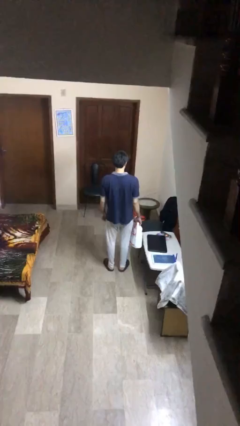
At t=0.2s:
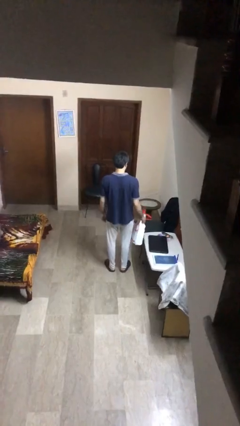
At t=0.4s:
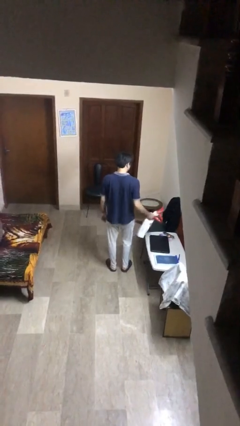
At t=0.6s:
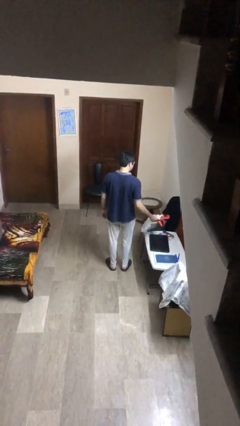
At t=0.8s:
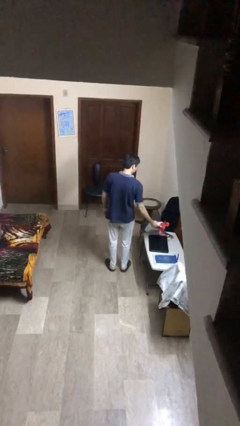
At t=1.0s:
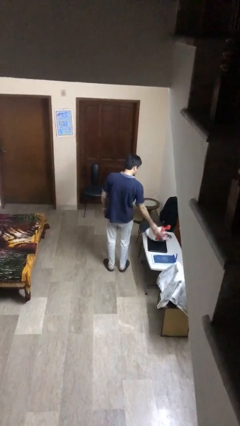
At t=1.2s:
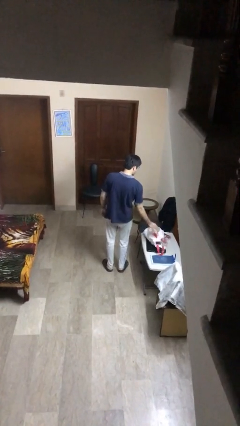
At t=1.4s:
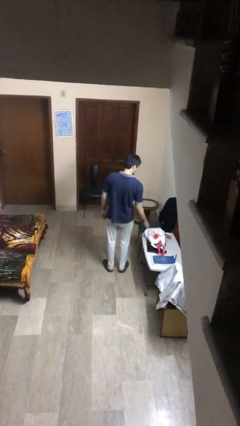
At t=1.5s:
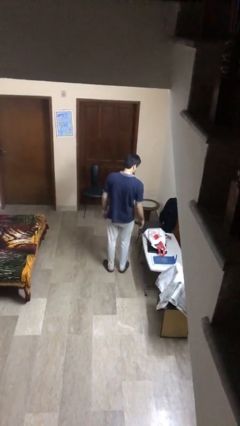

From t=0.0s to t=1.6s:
person puts down object on table

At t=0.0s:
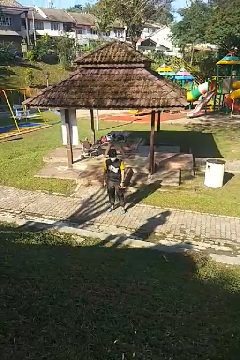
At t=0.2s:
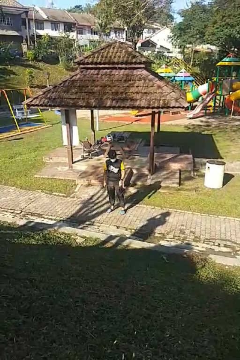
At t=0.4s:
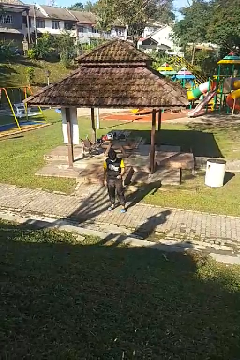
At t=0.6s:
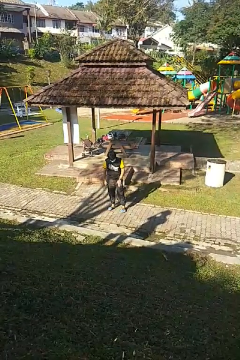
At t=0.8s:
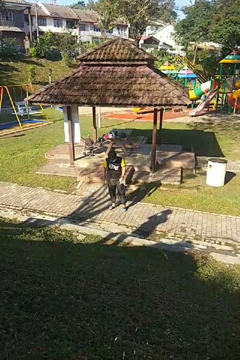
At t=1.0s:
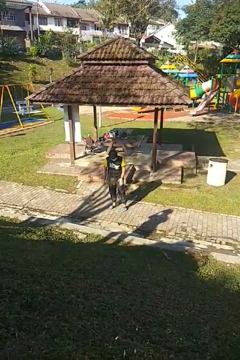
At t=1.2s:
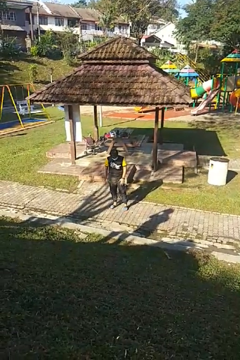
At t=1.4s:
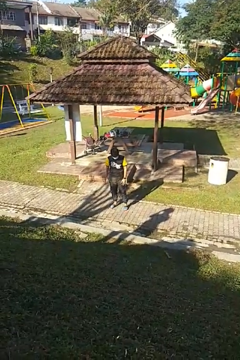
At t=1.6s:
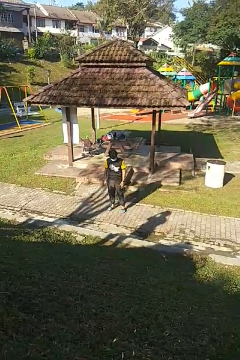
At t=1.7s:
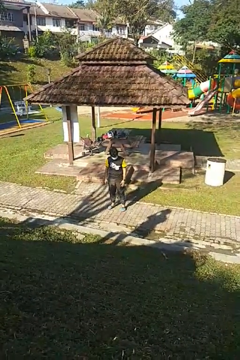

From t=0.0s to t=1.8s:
person slaps hands on thighs

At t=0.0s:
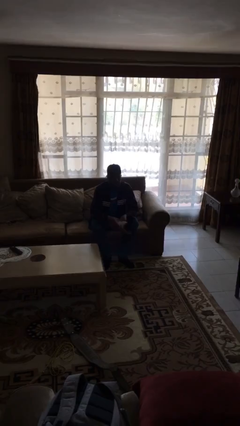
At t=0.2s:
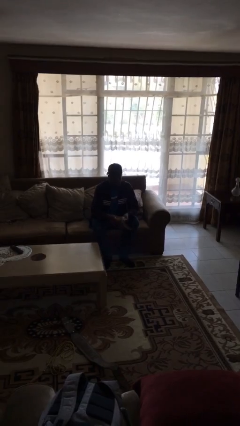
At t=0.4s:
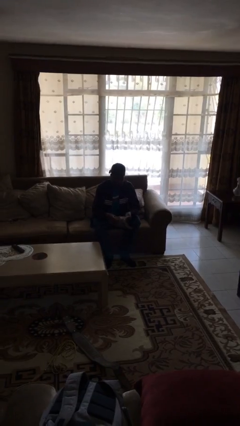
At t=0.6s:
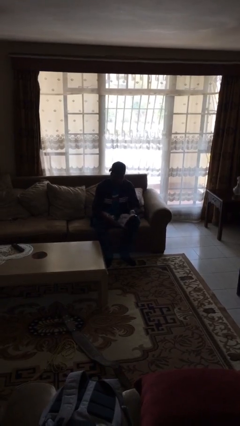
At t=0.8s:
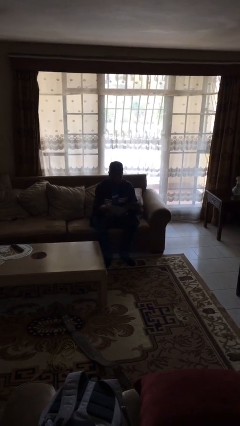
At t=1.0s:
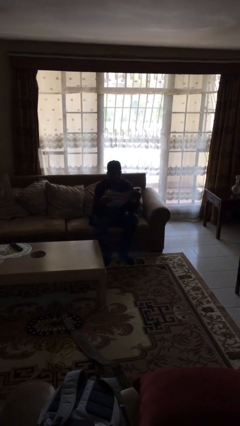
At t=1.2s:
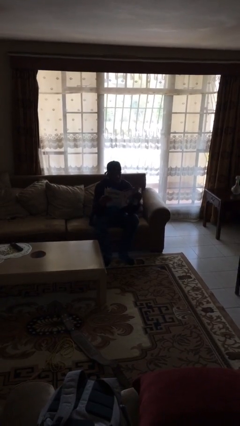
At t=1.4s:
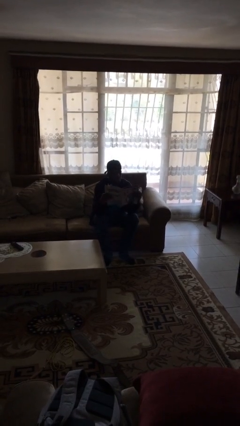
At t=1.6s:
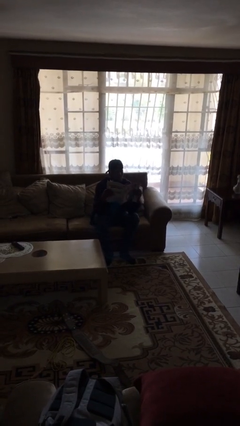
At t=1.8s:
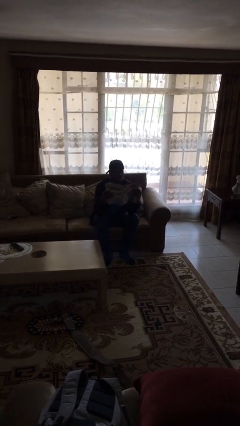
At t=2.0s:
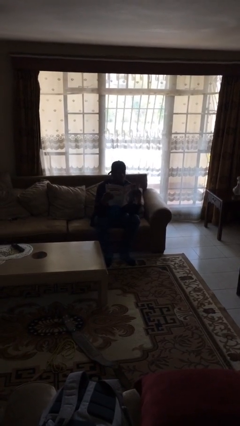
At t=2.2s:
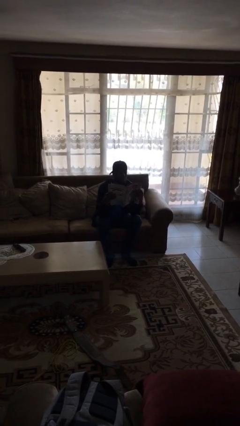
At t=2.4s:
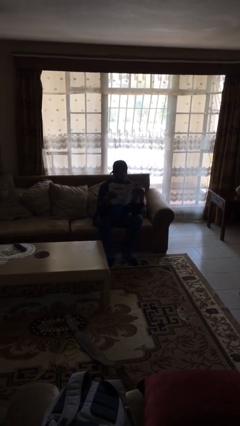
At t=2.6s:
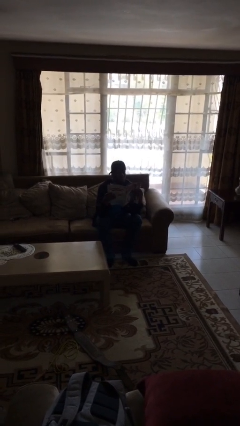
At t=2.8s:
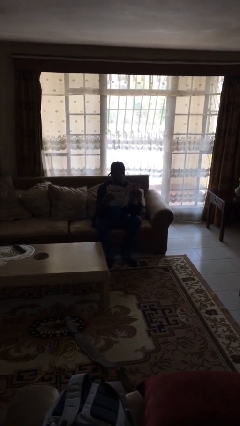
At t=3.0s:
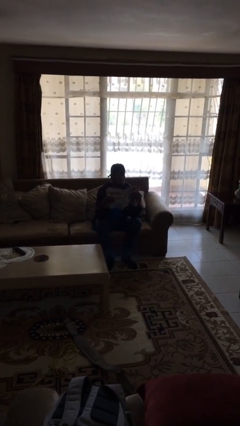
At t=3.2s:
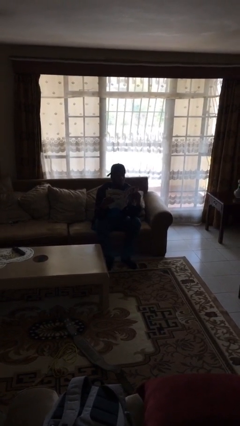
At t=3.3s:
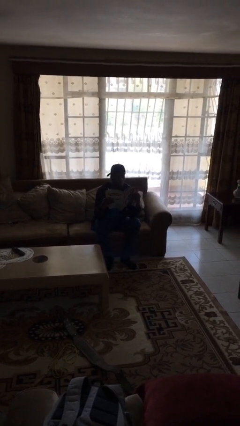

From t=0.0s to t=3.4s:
person reads document

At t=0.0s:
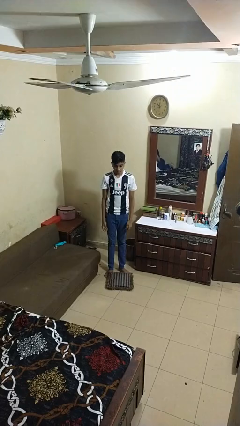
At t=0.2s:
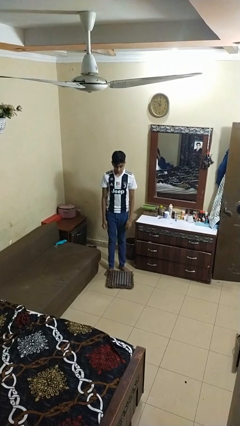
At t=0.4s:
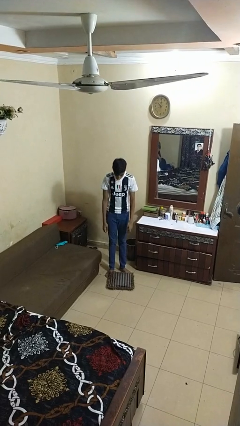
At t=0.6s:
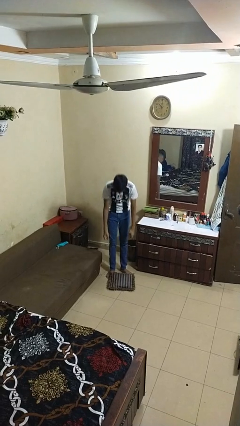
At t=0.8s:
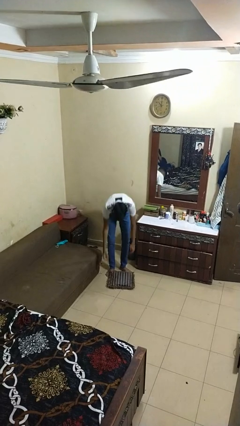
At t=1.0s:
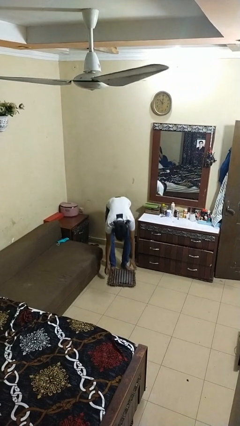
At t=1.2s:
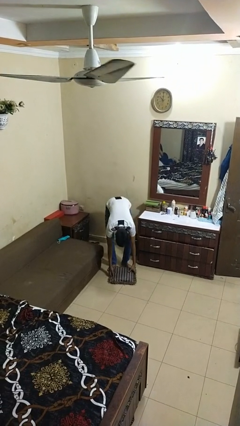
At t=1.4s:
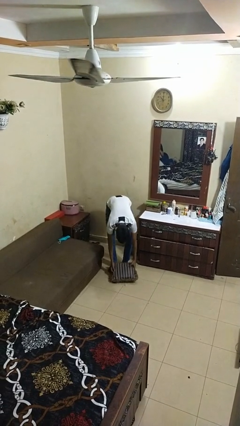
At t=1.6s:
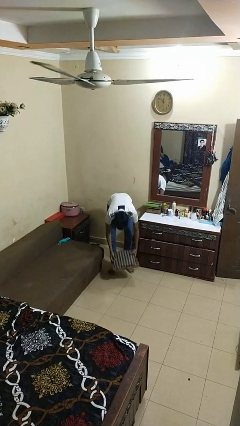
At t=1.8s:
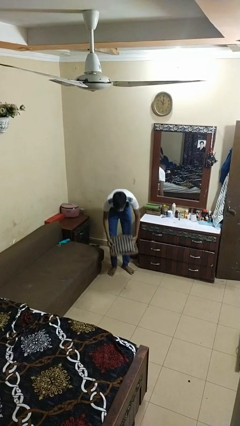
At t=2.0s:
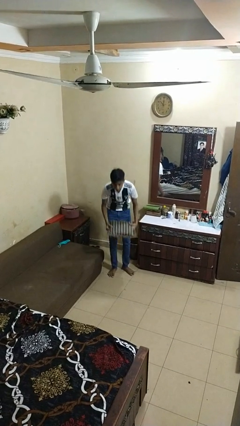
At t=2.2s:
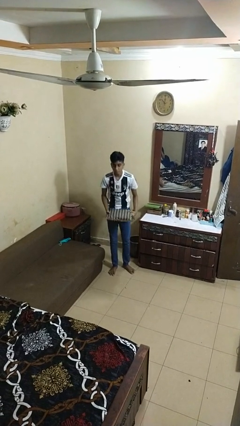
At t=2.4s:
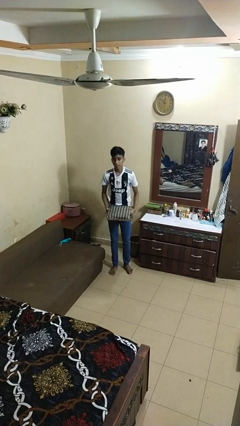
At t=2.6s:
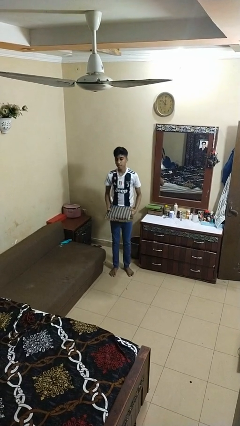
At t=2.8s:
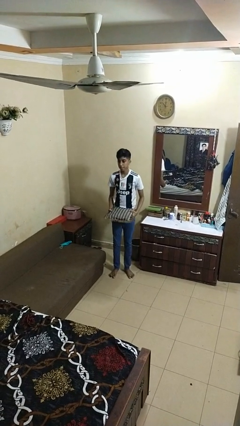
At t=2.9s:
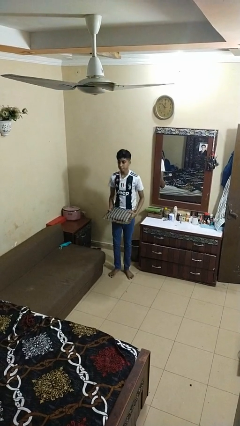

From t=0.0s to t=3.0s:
person picks up object from floor

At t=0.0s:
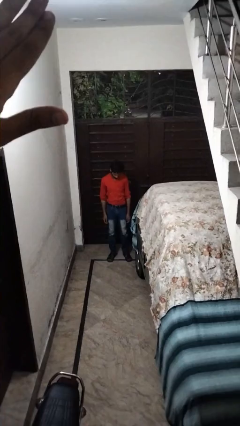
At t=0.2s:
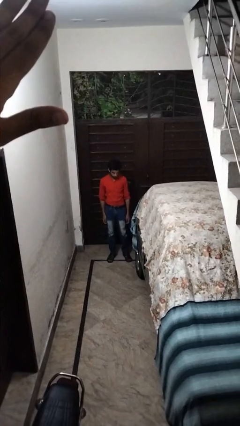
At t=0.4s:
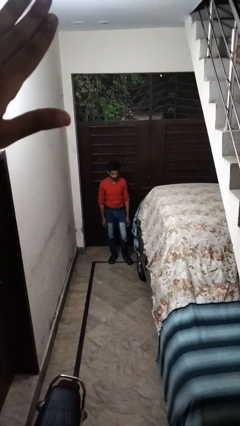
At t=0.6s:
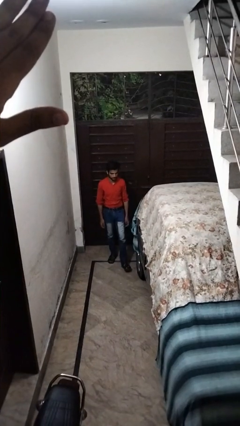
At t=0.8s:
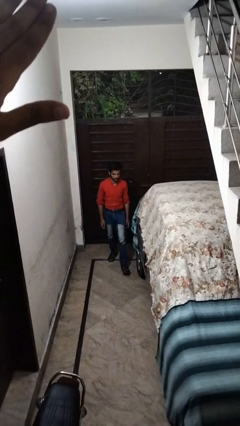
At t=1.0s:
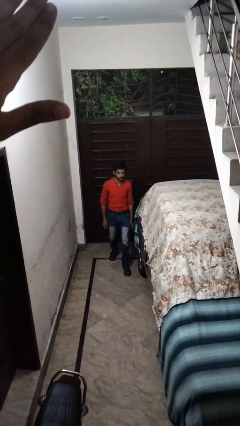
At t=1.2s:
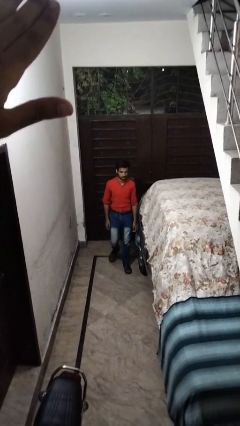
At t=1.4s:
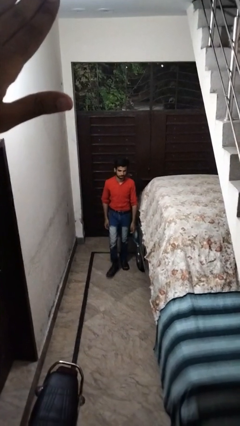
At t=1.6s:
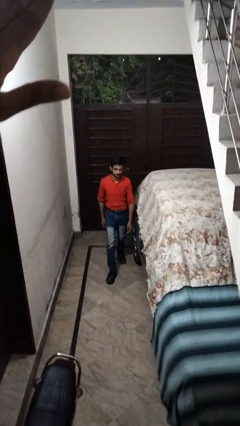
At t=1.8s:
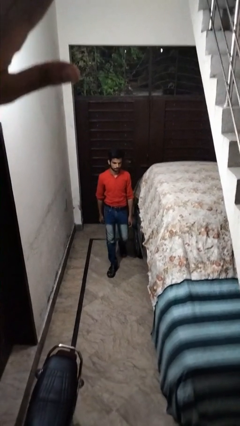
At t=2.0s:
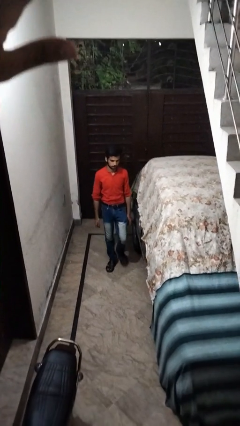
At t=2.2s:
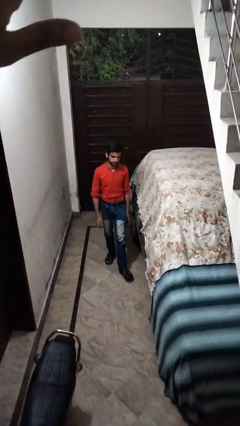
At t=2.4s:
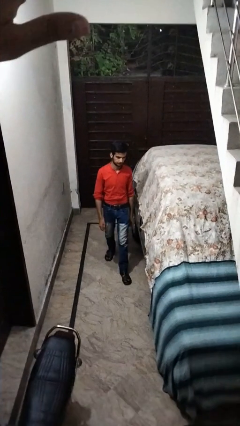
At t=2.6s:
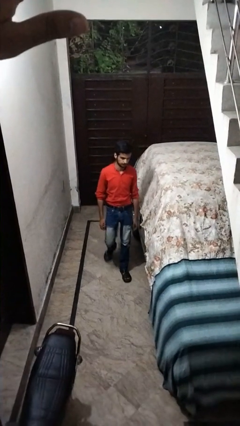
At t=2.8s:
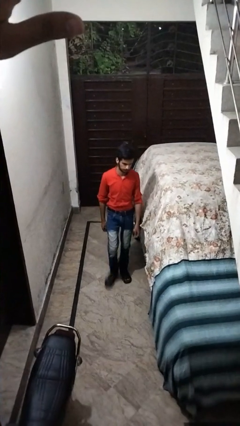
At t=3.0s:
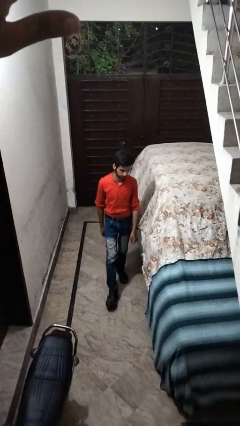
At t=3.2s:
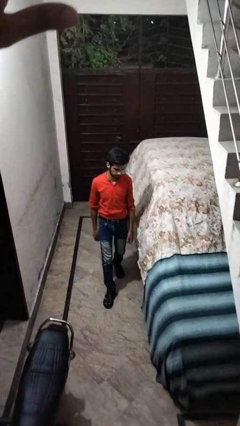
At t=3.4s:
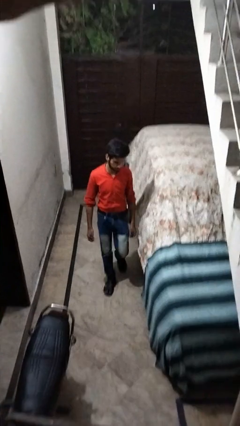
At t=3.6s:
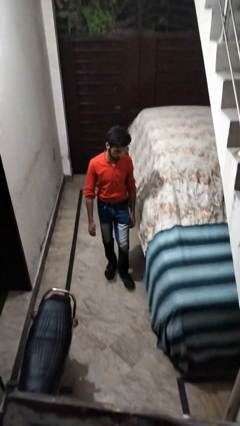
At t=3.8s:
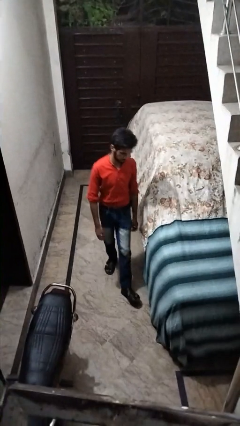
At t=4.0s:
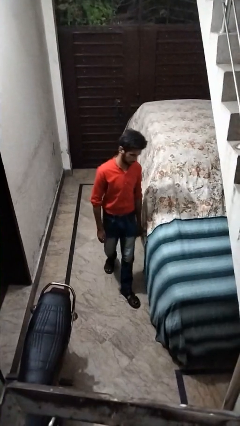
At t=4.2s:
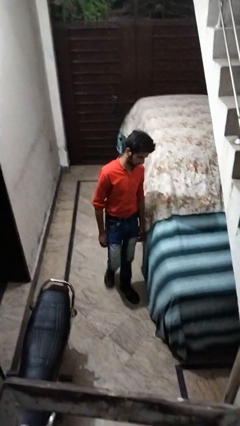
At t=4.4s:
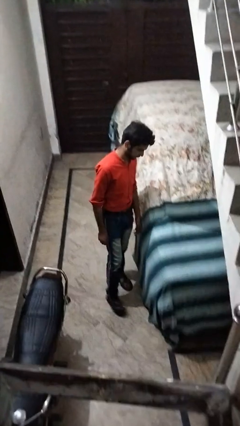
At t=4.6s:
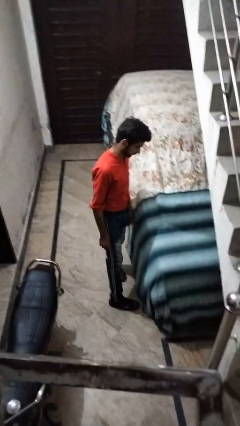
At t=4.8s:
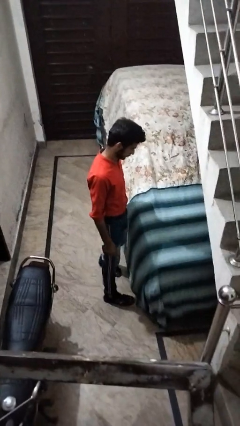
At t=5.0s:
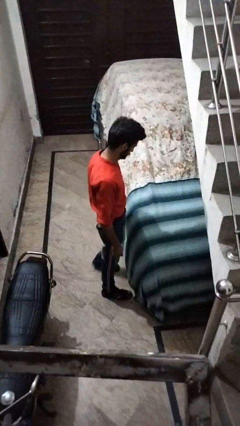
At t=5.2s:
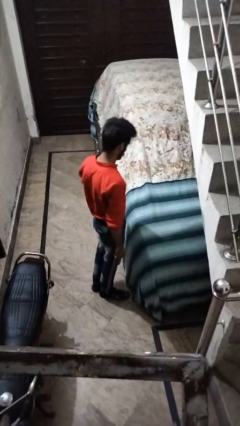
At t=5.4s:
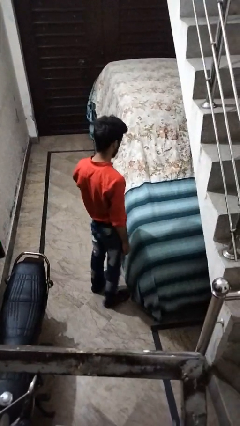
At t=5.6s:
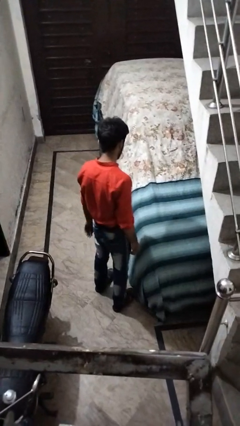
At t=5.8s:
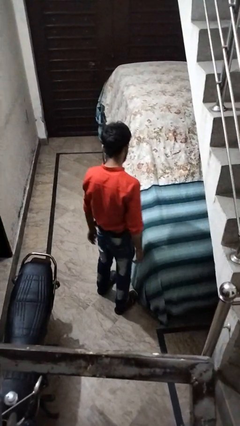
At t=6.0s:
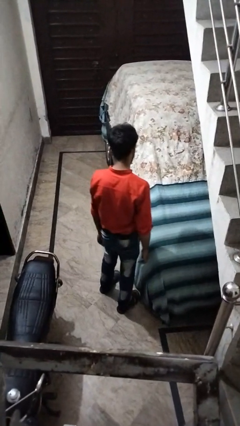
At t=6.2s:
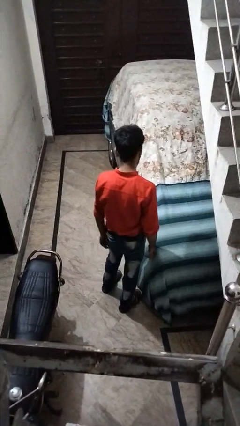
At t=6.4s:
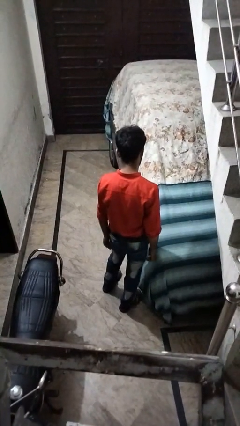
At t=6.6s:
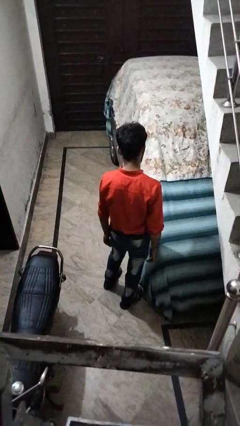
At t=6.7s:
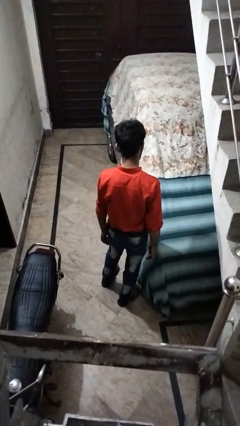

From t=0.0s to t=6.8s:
person walks around car

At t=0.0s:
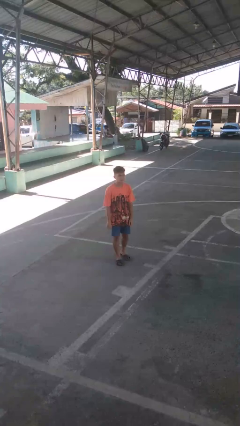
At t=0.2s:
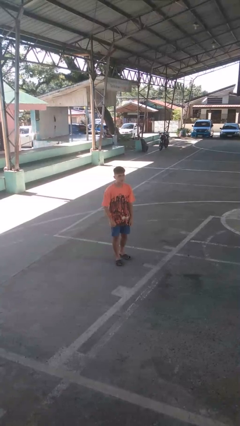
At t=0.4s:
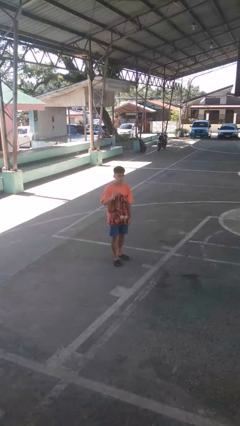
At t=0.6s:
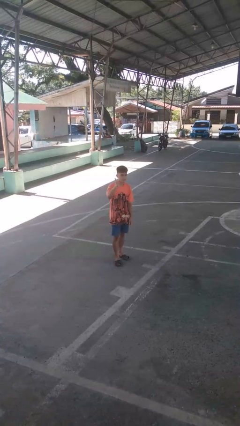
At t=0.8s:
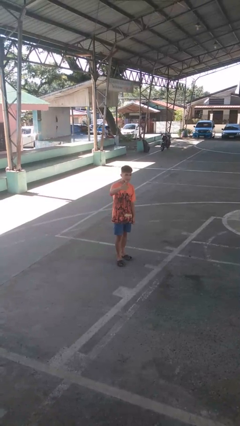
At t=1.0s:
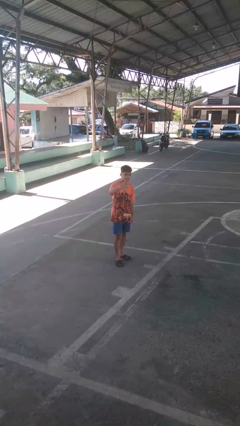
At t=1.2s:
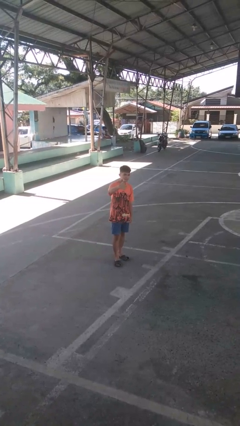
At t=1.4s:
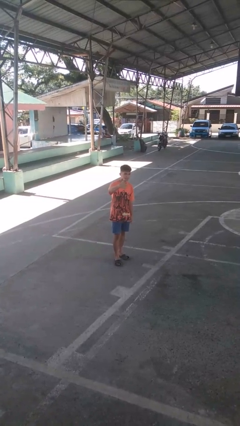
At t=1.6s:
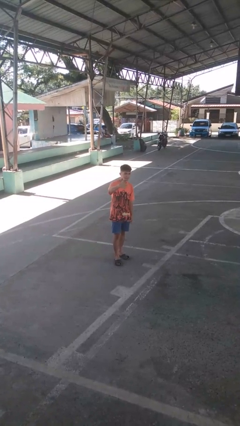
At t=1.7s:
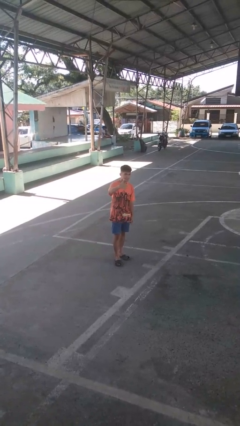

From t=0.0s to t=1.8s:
person gestures thumbs up
